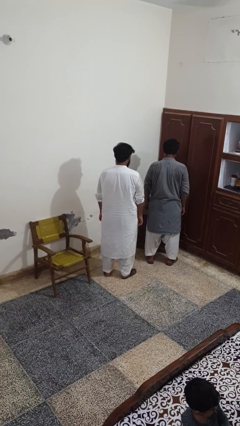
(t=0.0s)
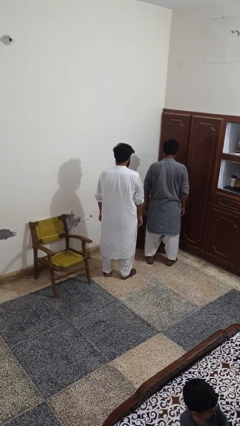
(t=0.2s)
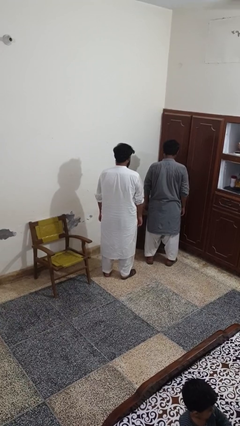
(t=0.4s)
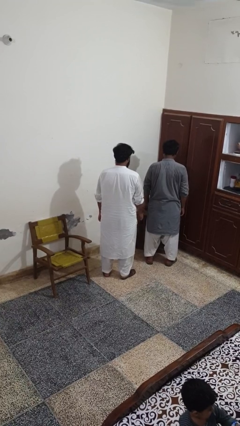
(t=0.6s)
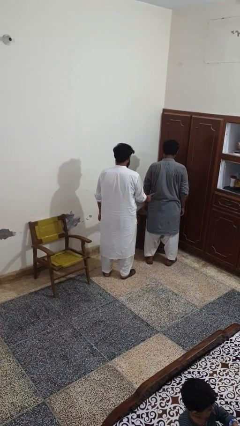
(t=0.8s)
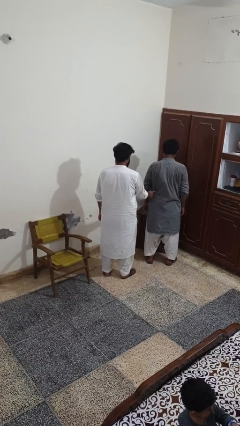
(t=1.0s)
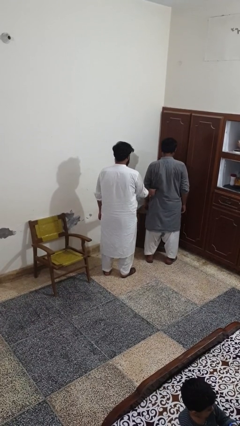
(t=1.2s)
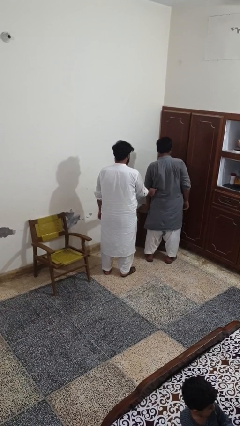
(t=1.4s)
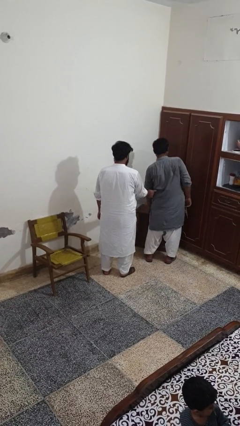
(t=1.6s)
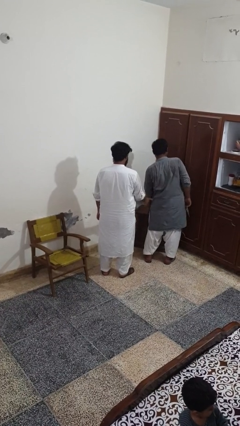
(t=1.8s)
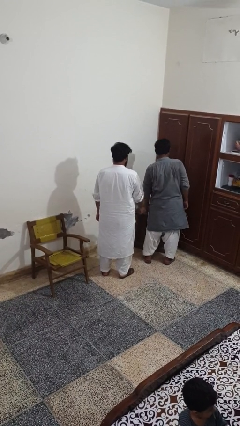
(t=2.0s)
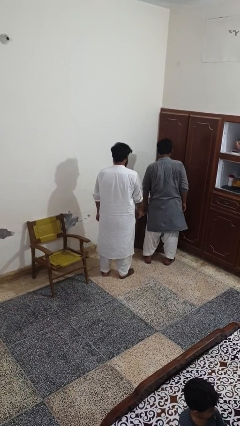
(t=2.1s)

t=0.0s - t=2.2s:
person tickles person

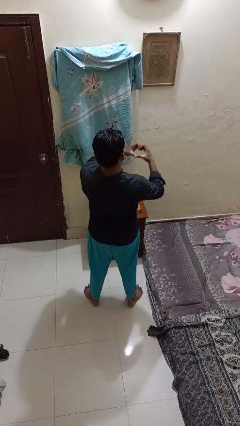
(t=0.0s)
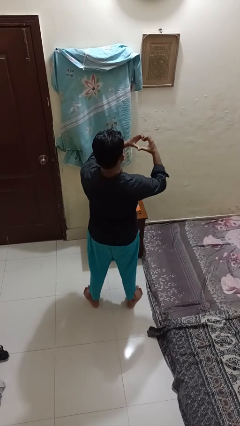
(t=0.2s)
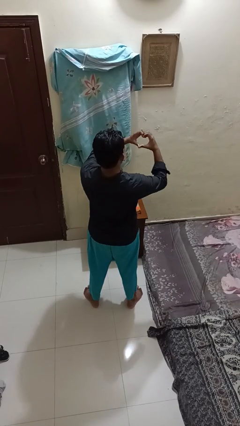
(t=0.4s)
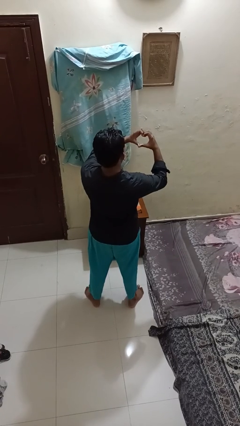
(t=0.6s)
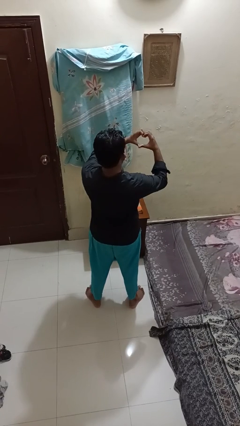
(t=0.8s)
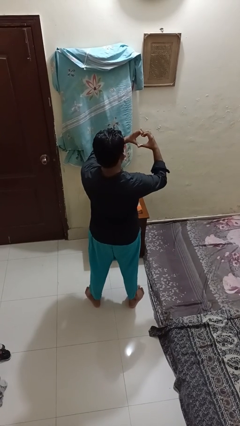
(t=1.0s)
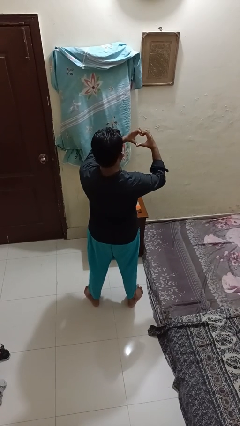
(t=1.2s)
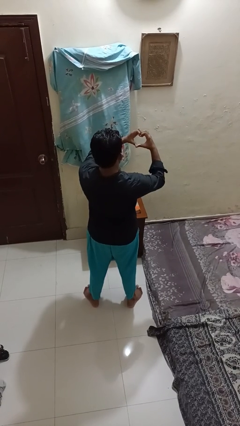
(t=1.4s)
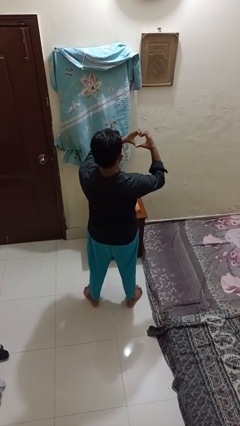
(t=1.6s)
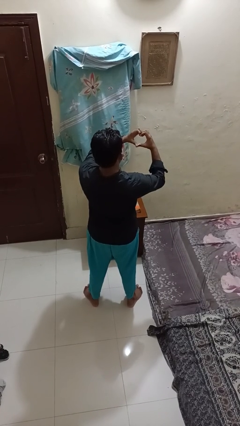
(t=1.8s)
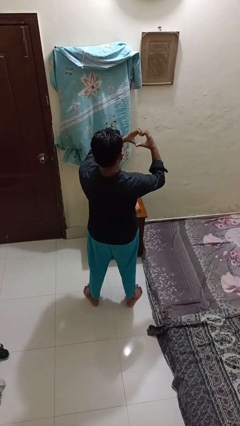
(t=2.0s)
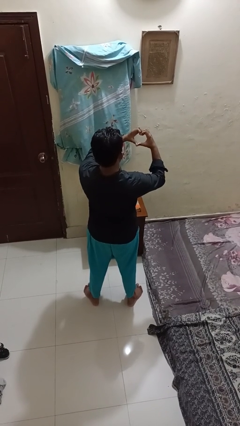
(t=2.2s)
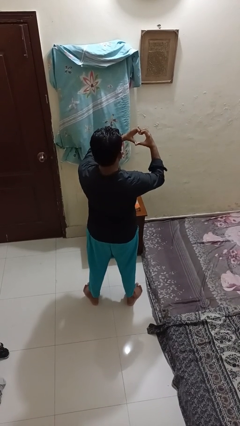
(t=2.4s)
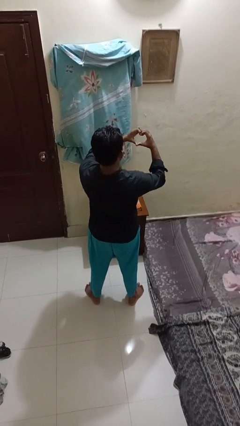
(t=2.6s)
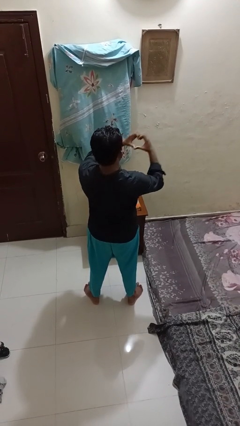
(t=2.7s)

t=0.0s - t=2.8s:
person gestures heart

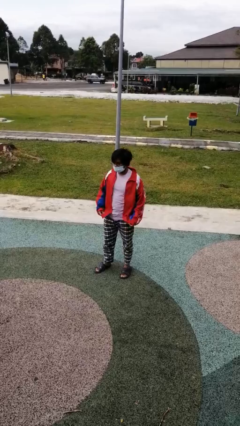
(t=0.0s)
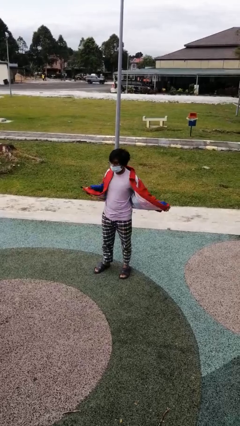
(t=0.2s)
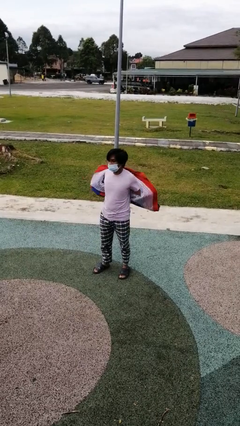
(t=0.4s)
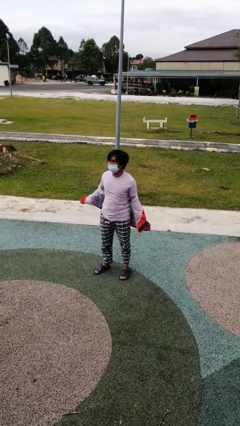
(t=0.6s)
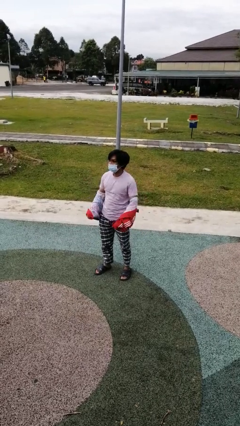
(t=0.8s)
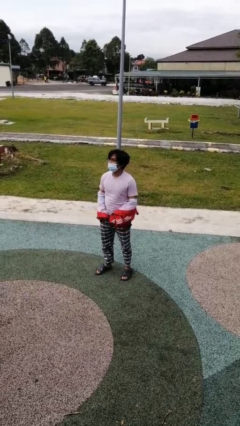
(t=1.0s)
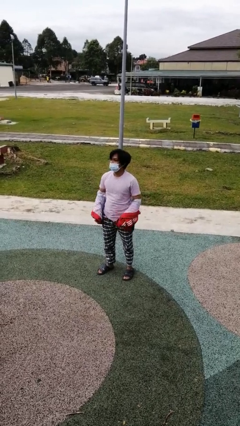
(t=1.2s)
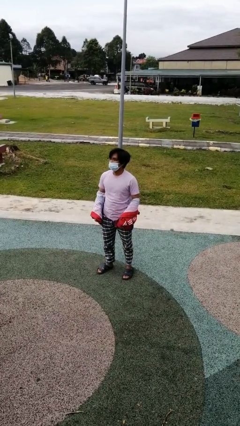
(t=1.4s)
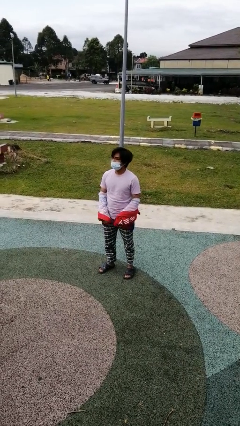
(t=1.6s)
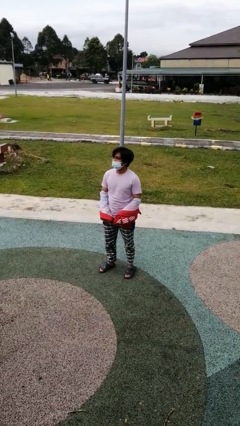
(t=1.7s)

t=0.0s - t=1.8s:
person takes off jacket

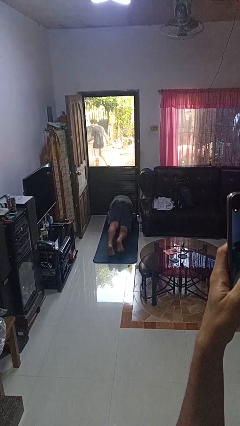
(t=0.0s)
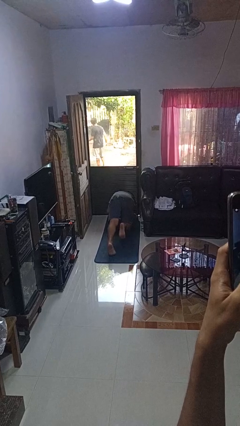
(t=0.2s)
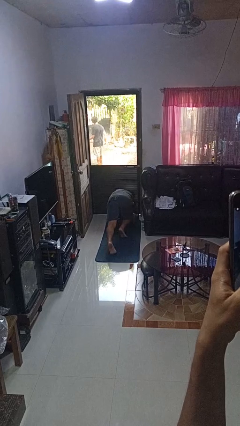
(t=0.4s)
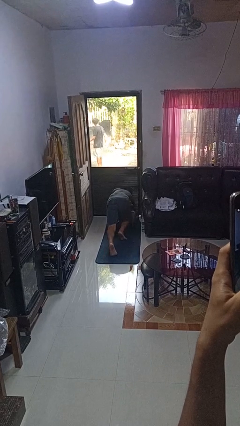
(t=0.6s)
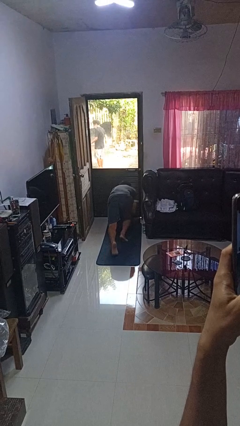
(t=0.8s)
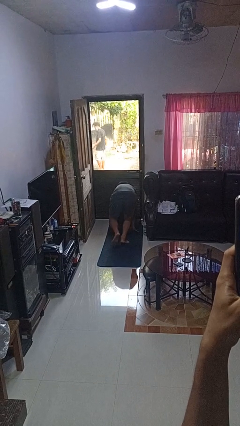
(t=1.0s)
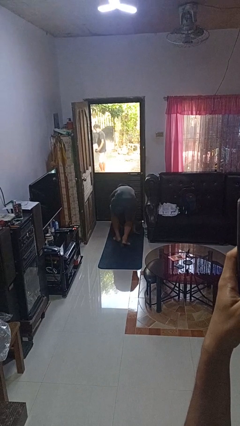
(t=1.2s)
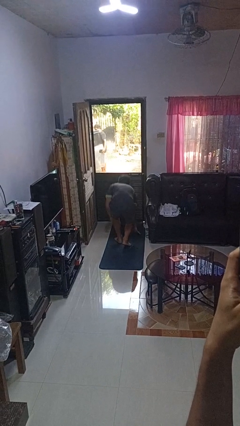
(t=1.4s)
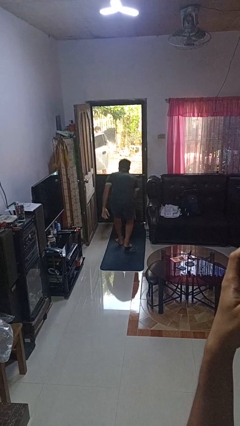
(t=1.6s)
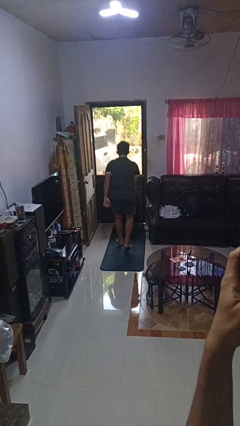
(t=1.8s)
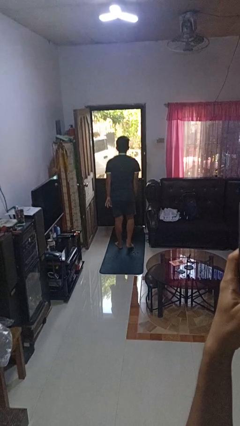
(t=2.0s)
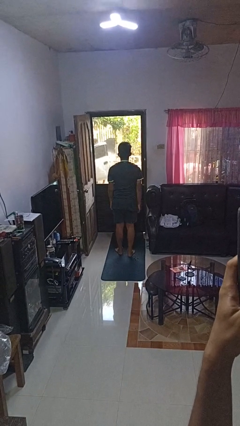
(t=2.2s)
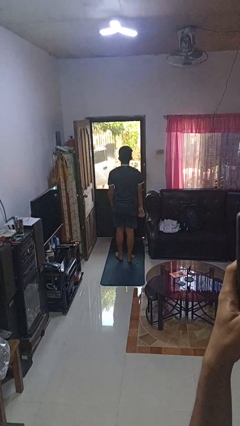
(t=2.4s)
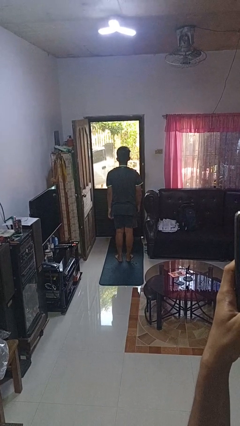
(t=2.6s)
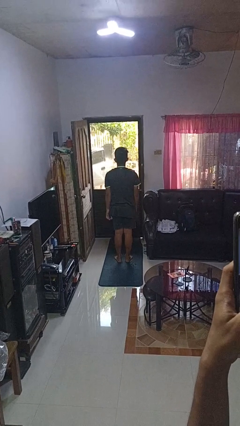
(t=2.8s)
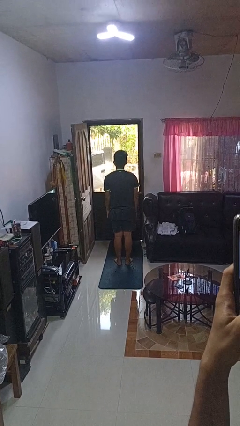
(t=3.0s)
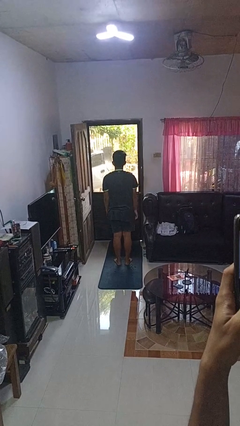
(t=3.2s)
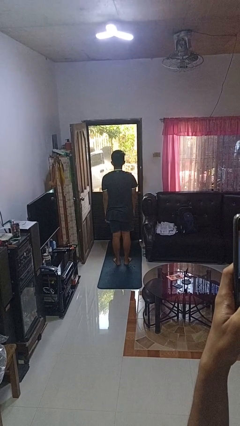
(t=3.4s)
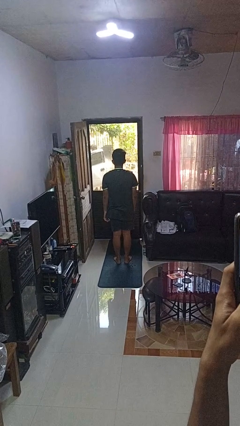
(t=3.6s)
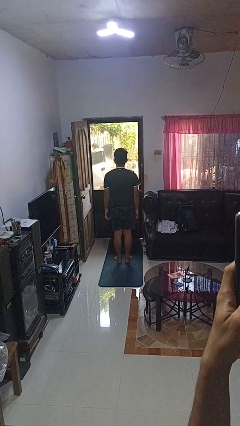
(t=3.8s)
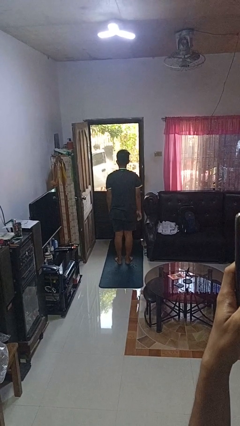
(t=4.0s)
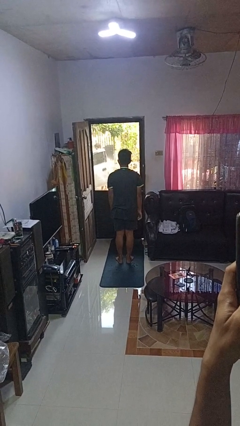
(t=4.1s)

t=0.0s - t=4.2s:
person stands up from floor

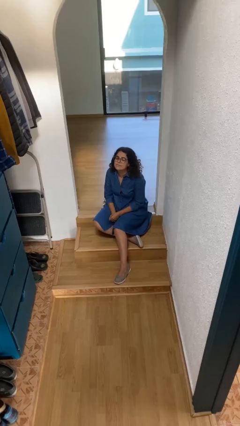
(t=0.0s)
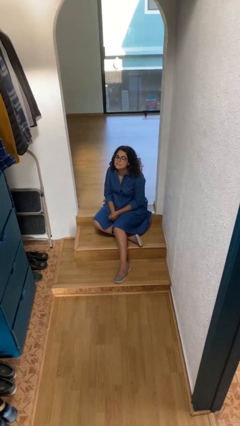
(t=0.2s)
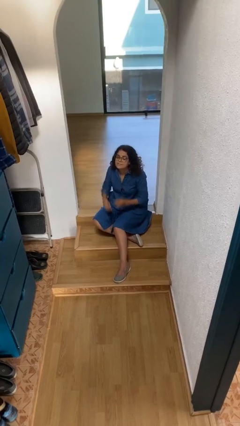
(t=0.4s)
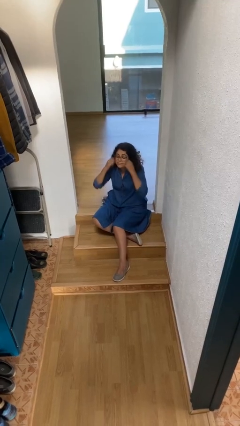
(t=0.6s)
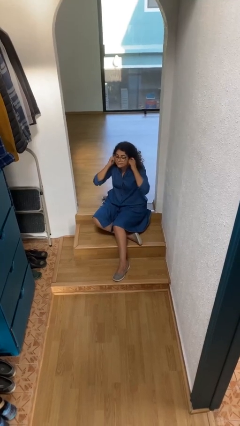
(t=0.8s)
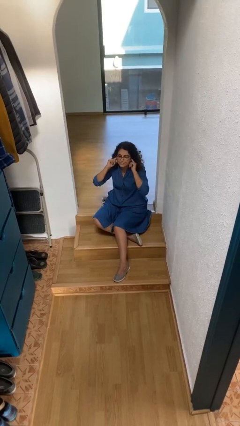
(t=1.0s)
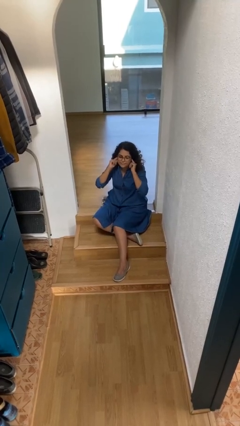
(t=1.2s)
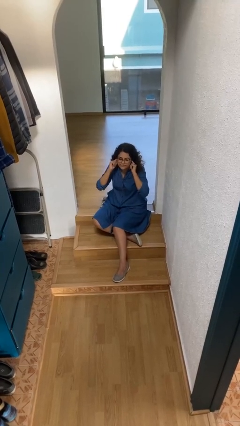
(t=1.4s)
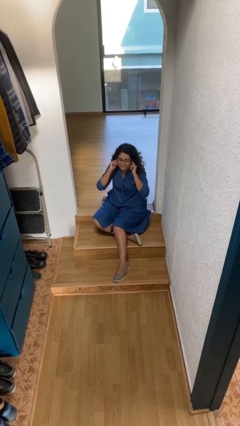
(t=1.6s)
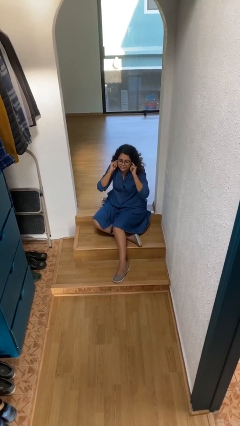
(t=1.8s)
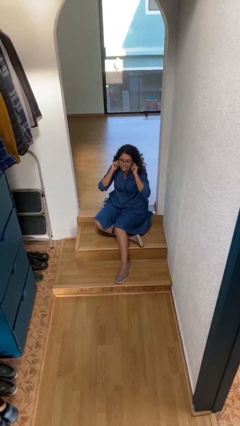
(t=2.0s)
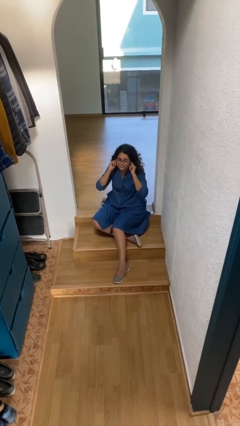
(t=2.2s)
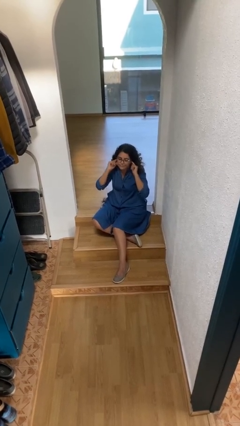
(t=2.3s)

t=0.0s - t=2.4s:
person puts fingers in ear

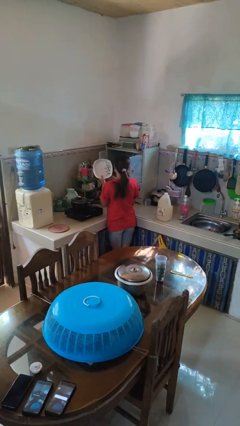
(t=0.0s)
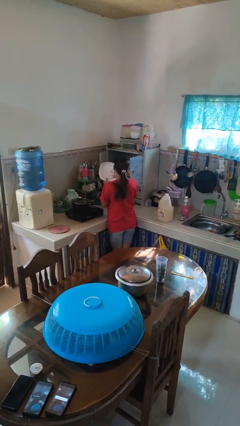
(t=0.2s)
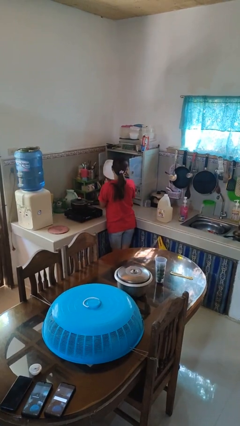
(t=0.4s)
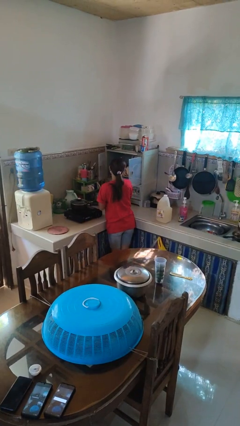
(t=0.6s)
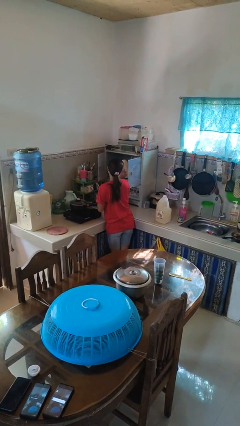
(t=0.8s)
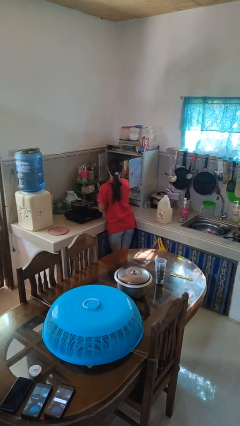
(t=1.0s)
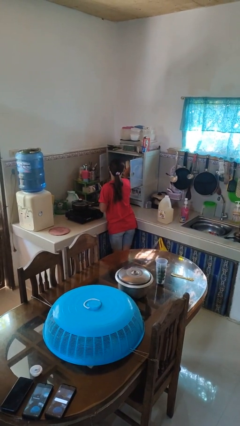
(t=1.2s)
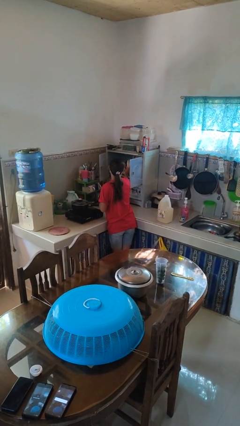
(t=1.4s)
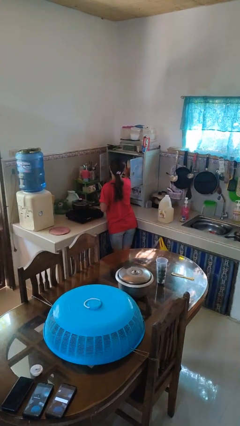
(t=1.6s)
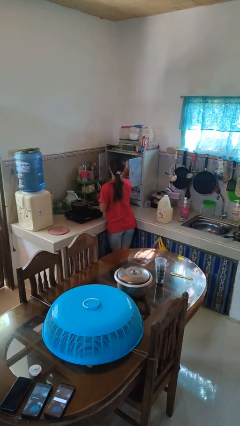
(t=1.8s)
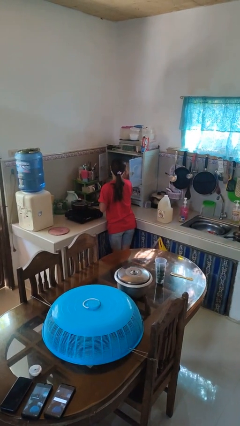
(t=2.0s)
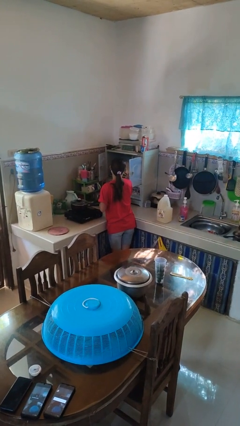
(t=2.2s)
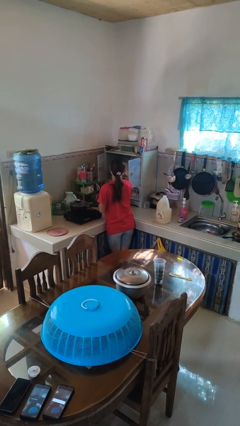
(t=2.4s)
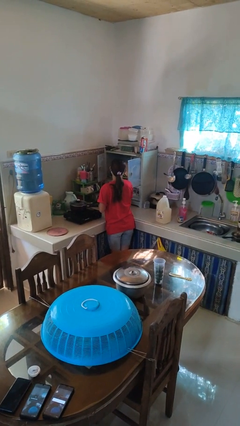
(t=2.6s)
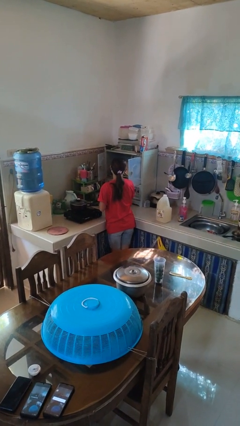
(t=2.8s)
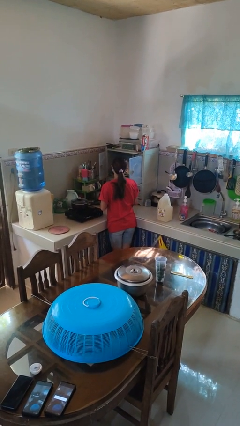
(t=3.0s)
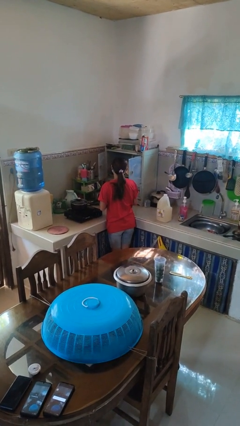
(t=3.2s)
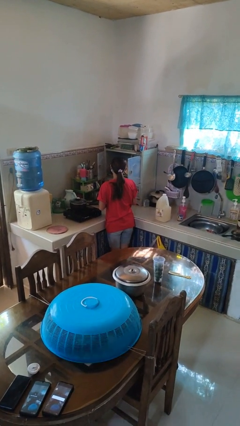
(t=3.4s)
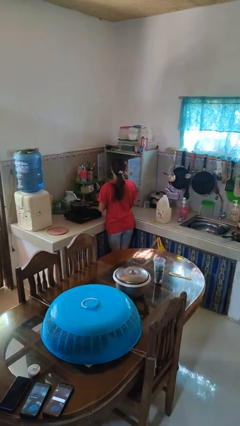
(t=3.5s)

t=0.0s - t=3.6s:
person puts object in cabinet

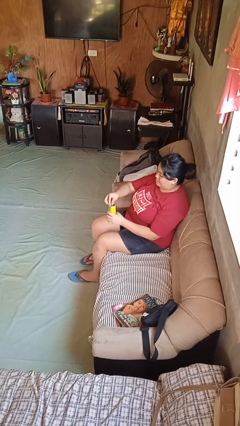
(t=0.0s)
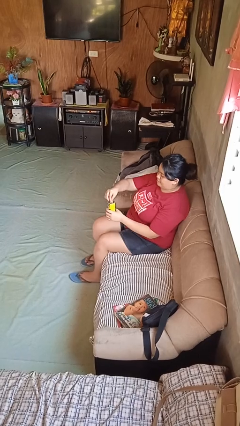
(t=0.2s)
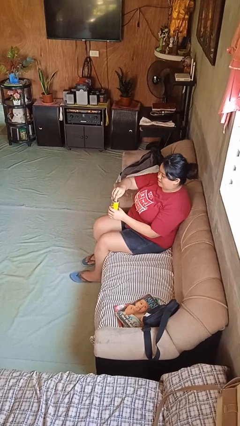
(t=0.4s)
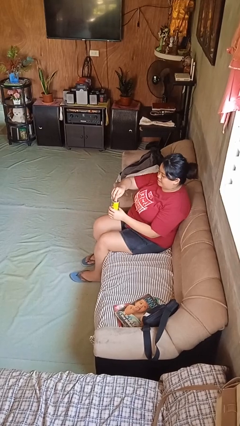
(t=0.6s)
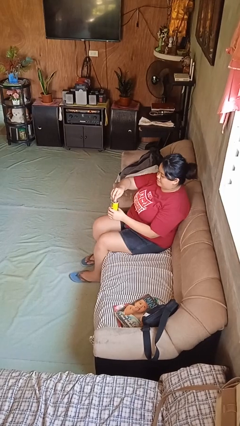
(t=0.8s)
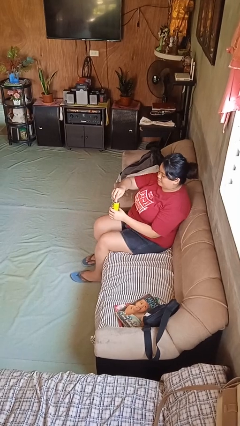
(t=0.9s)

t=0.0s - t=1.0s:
person opens beverage can
